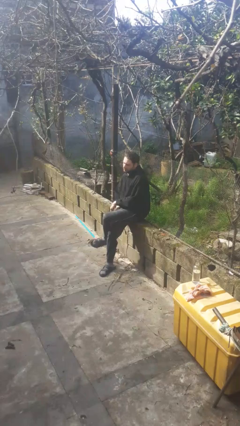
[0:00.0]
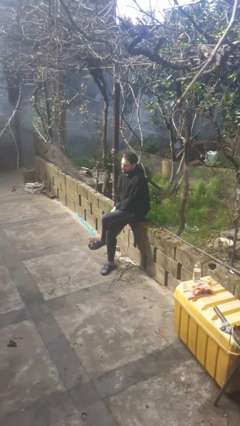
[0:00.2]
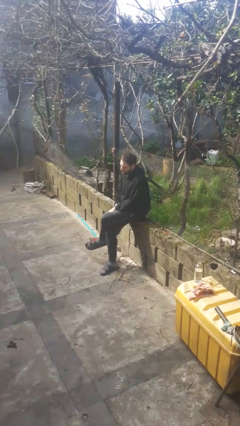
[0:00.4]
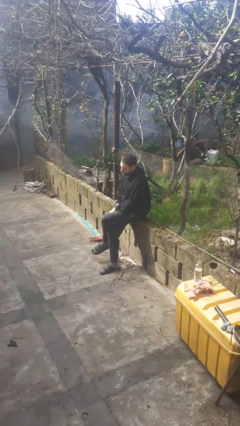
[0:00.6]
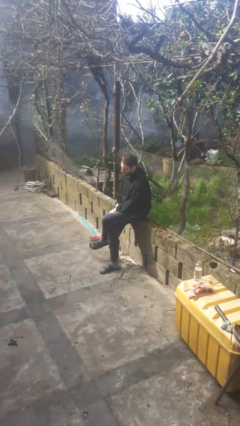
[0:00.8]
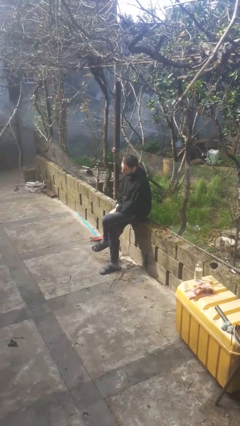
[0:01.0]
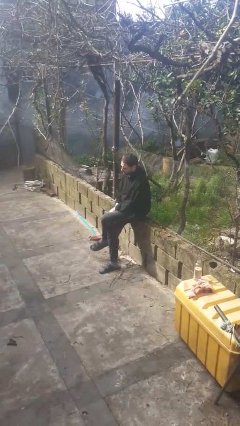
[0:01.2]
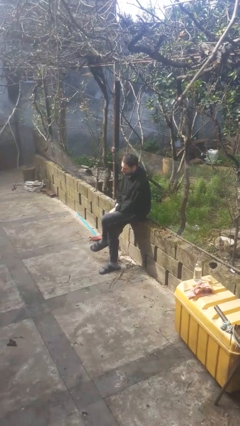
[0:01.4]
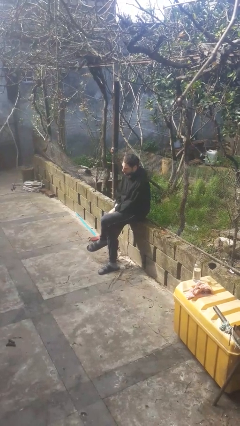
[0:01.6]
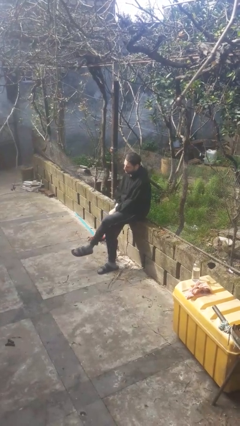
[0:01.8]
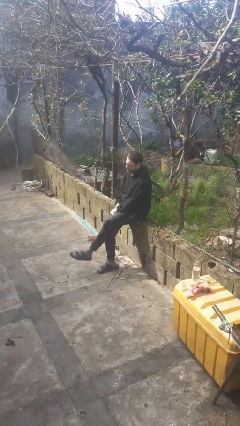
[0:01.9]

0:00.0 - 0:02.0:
person crosses legs

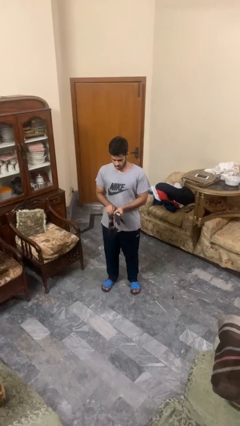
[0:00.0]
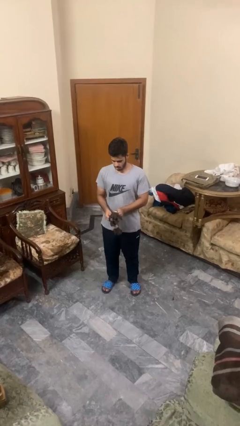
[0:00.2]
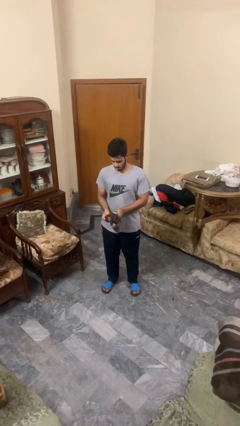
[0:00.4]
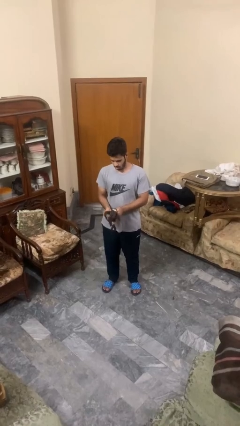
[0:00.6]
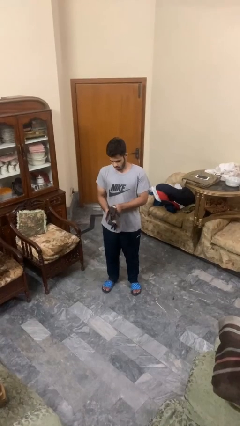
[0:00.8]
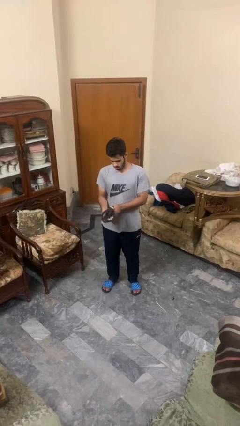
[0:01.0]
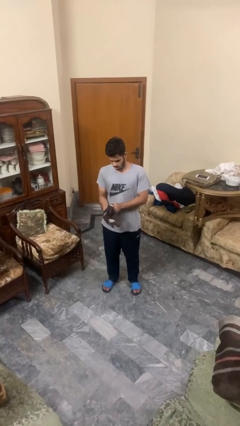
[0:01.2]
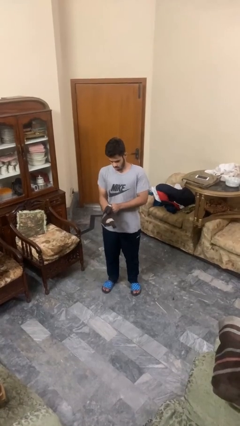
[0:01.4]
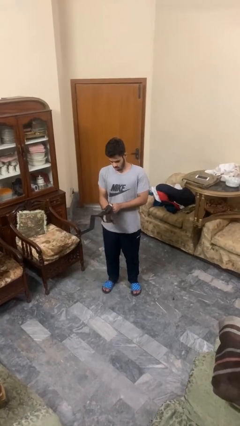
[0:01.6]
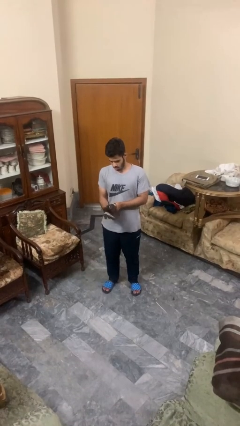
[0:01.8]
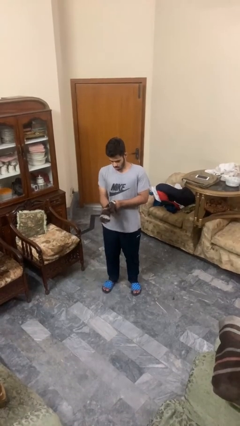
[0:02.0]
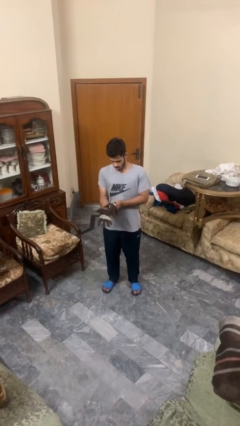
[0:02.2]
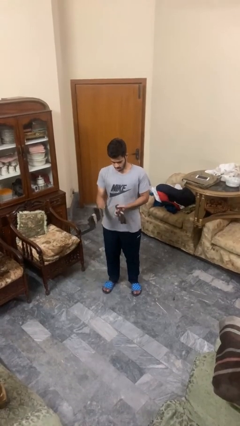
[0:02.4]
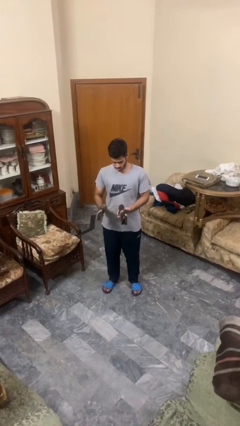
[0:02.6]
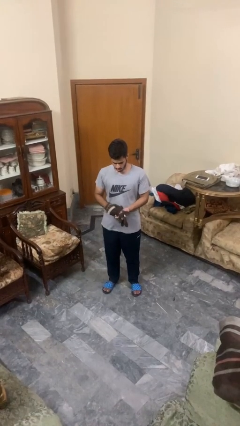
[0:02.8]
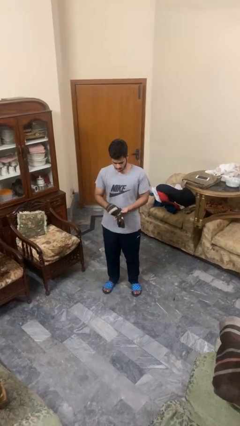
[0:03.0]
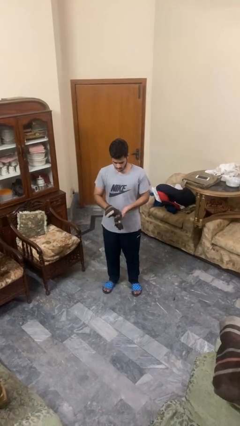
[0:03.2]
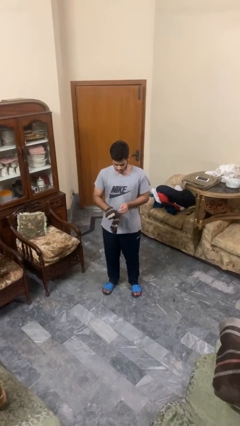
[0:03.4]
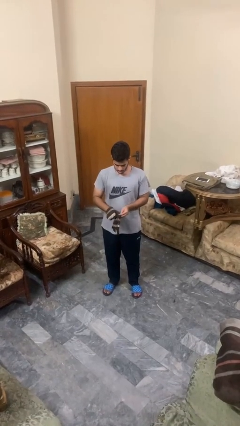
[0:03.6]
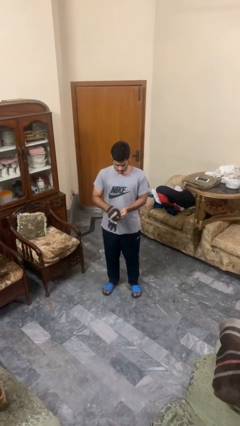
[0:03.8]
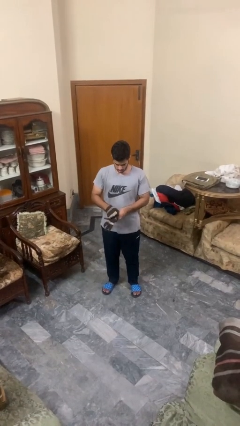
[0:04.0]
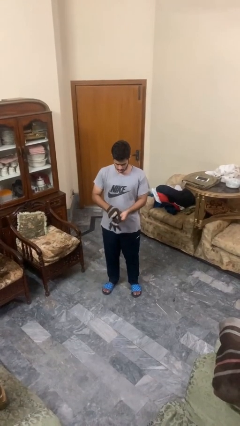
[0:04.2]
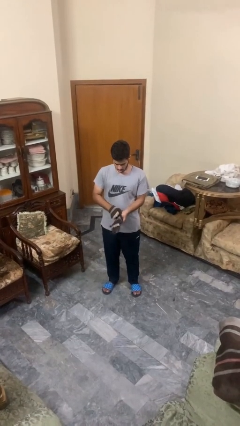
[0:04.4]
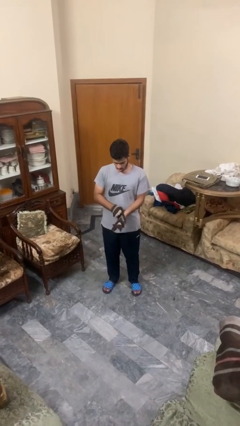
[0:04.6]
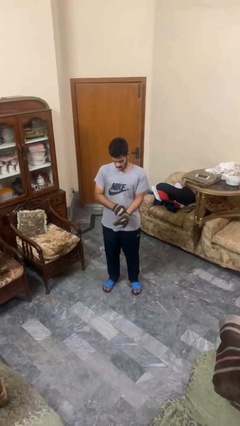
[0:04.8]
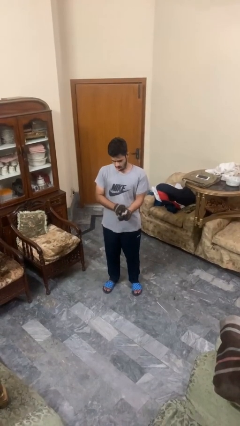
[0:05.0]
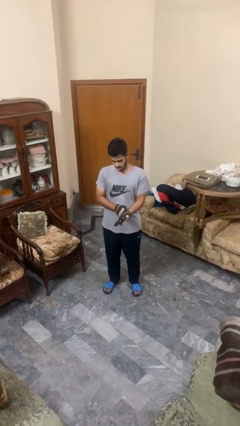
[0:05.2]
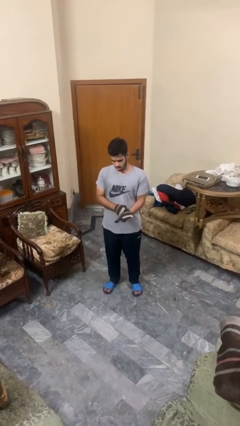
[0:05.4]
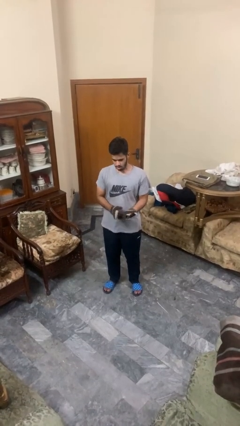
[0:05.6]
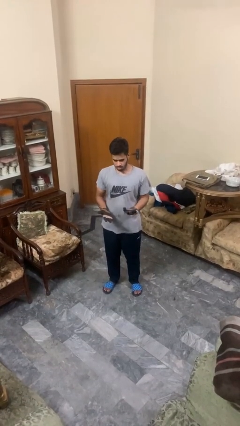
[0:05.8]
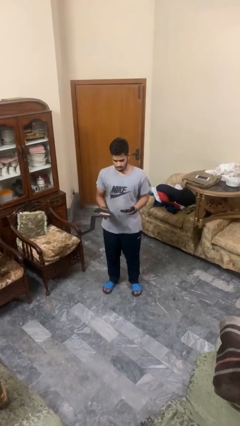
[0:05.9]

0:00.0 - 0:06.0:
person puts on gloves

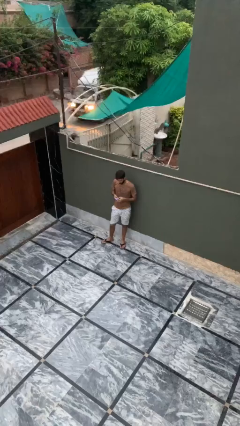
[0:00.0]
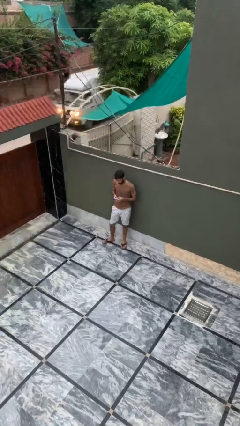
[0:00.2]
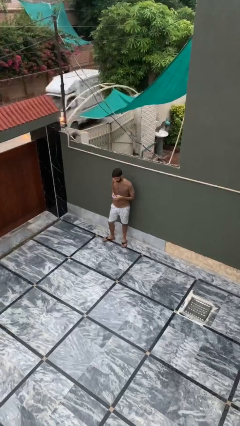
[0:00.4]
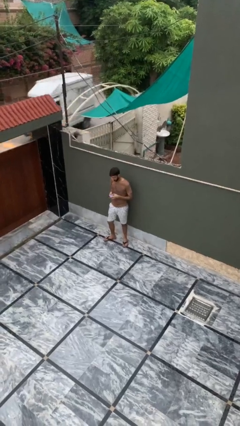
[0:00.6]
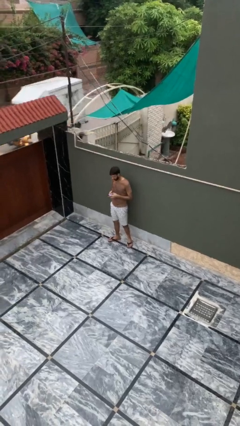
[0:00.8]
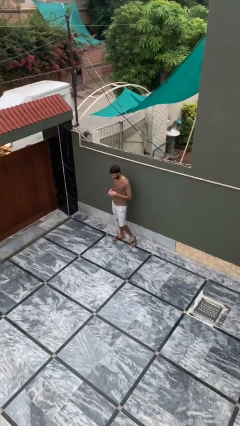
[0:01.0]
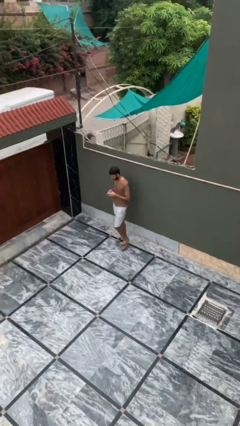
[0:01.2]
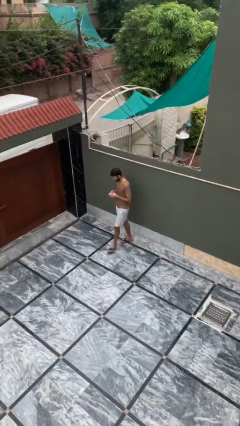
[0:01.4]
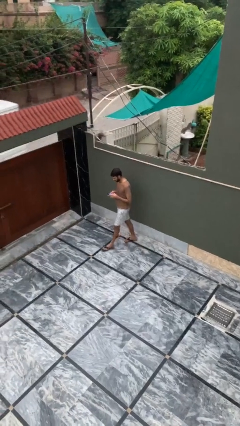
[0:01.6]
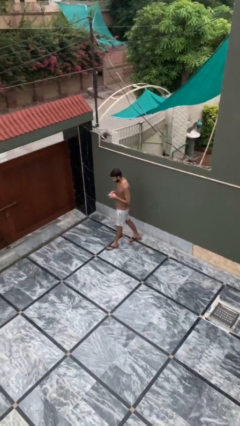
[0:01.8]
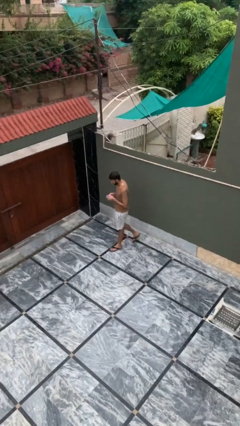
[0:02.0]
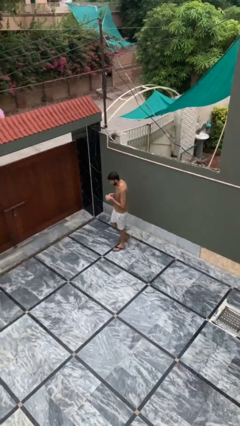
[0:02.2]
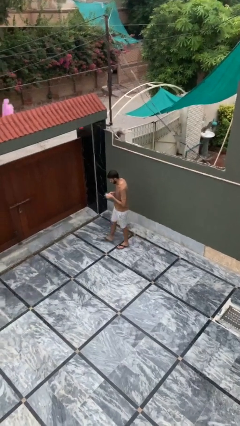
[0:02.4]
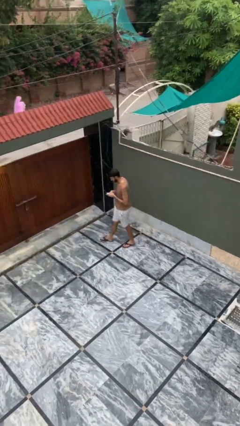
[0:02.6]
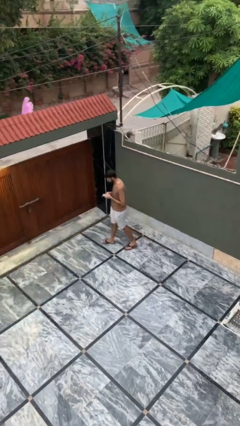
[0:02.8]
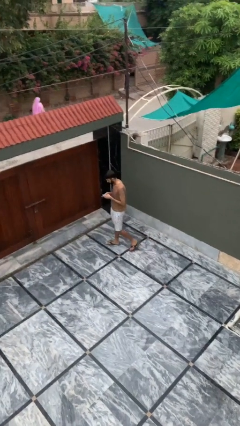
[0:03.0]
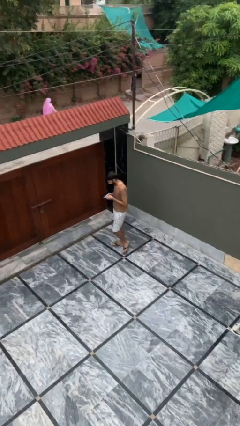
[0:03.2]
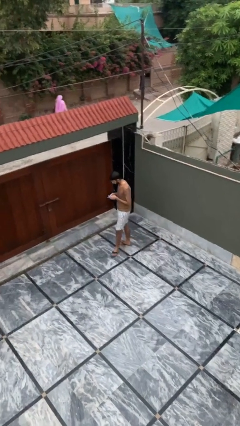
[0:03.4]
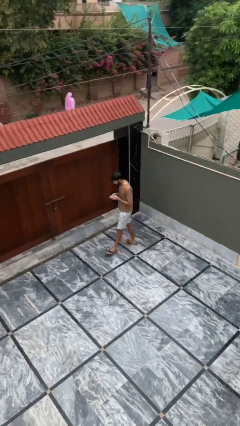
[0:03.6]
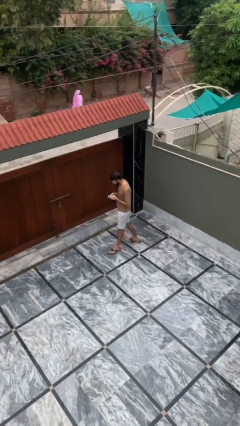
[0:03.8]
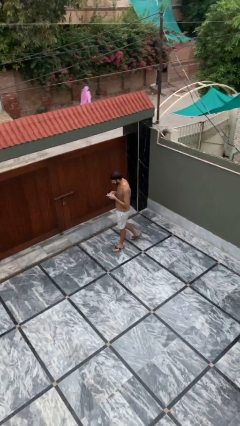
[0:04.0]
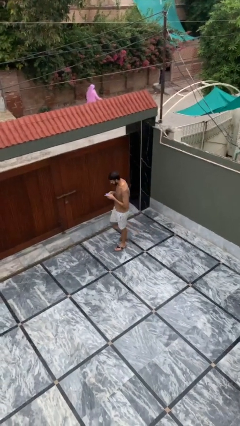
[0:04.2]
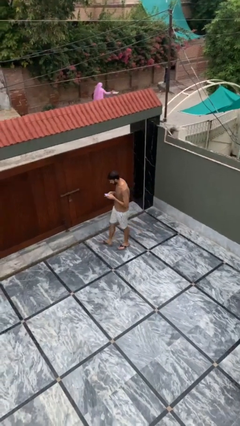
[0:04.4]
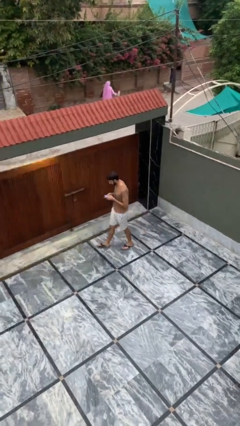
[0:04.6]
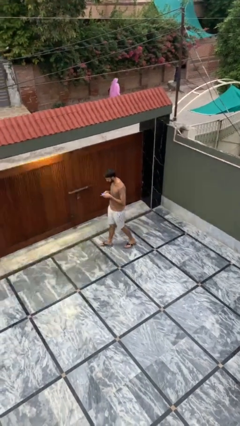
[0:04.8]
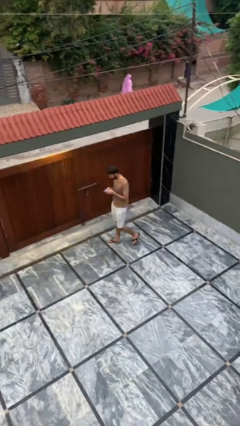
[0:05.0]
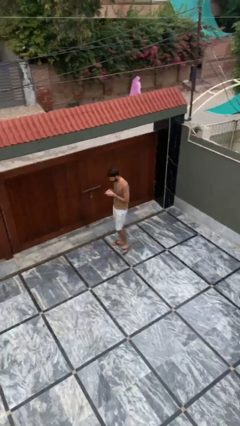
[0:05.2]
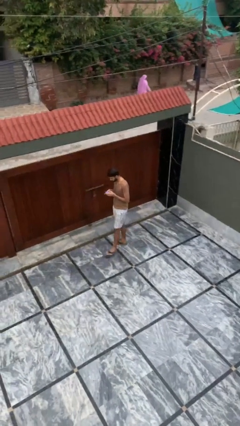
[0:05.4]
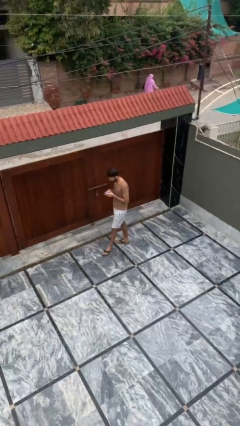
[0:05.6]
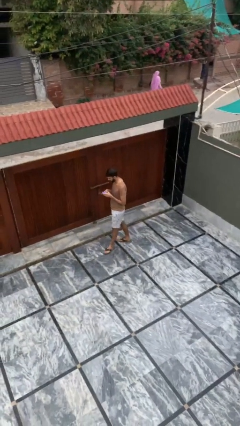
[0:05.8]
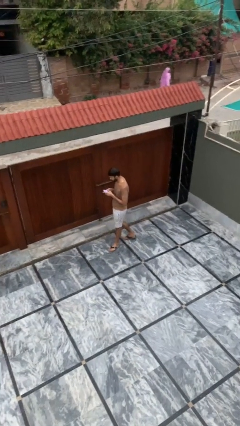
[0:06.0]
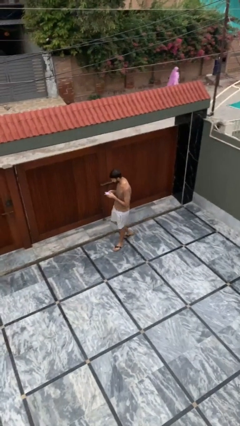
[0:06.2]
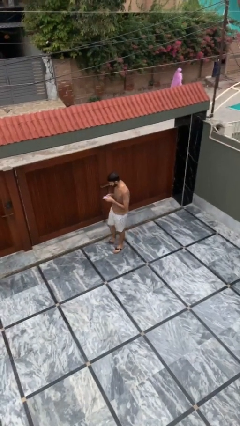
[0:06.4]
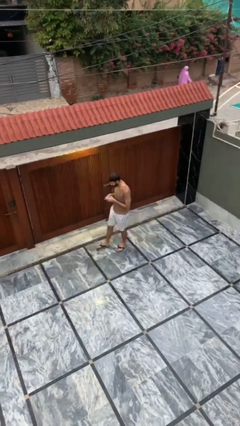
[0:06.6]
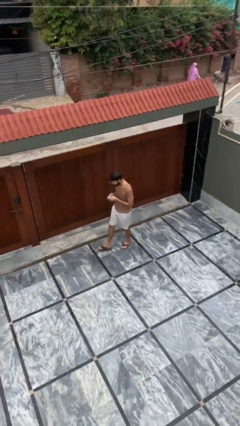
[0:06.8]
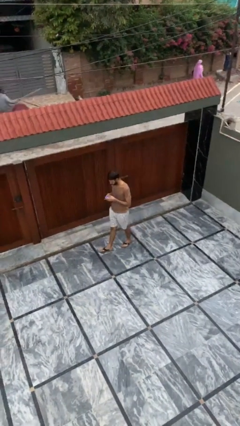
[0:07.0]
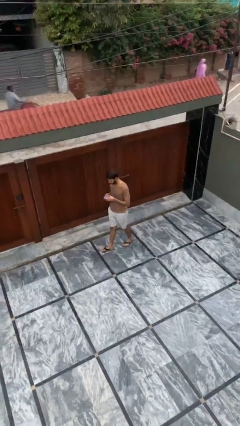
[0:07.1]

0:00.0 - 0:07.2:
person texts on phone

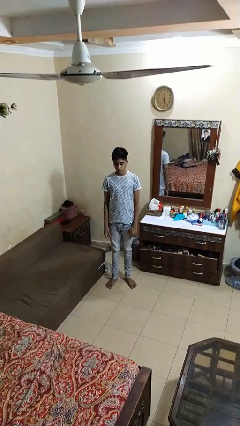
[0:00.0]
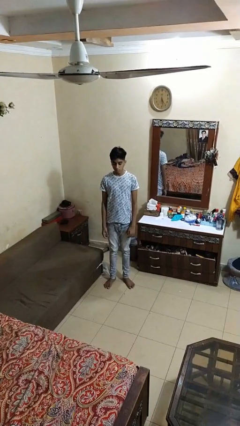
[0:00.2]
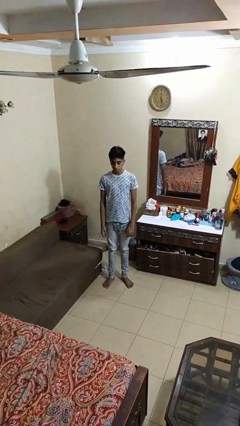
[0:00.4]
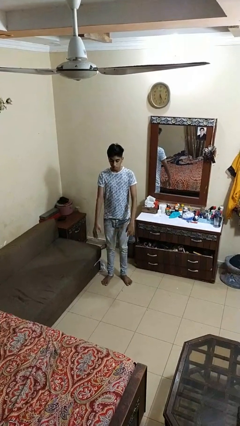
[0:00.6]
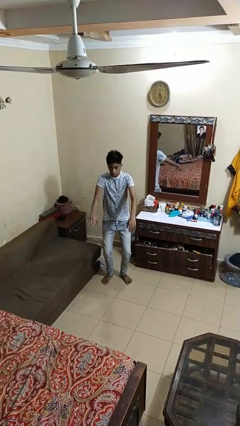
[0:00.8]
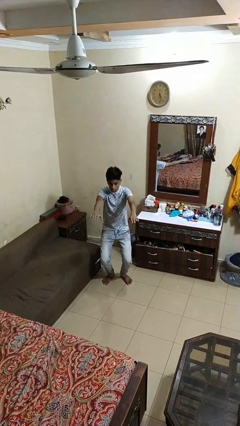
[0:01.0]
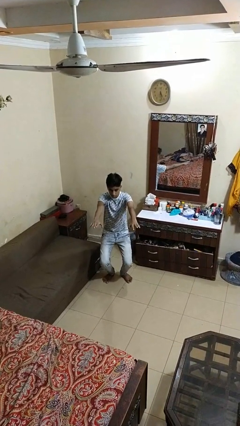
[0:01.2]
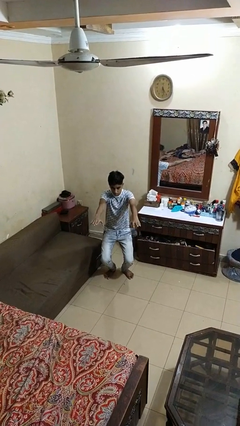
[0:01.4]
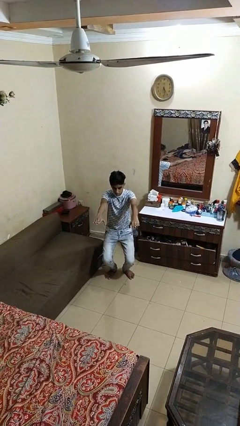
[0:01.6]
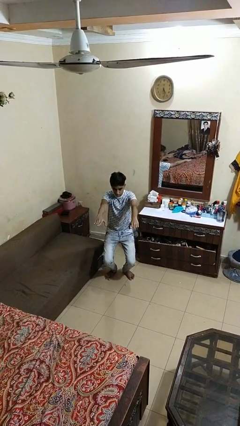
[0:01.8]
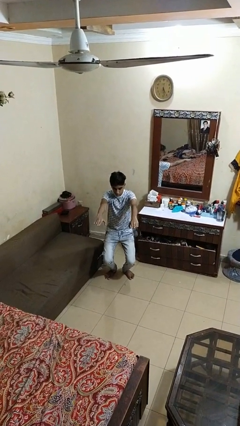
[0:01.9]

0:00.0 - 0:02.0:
person squats

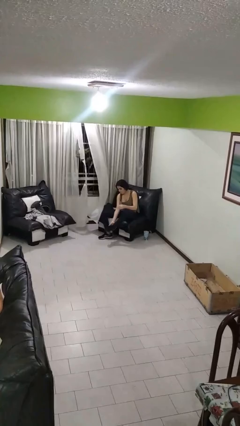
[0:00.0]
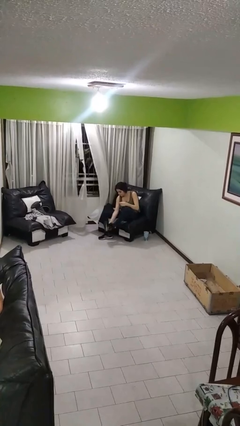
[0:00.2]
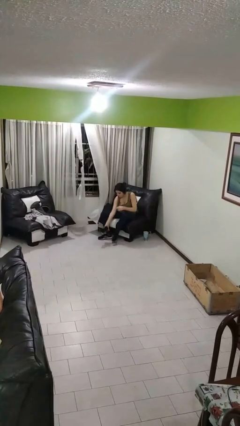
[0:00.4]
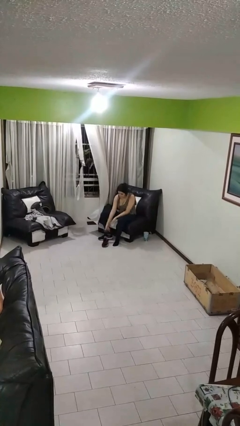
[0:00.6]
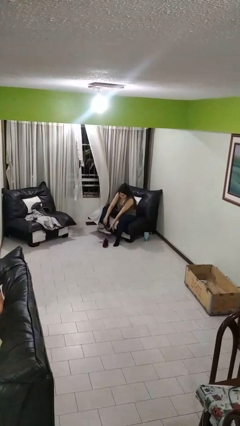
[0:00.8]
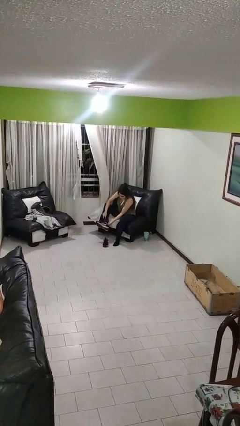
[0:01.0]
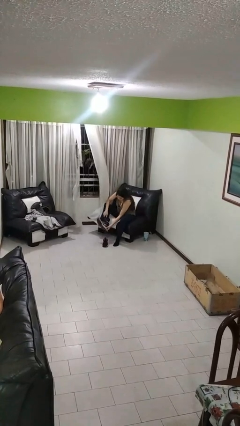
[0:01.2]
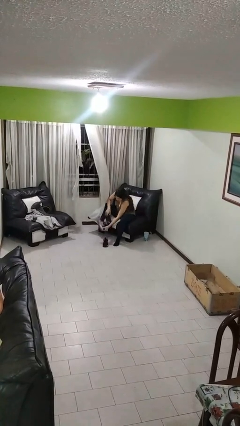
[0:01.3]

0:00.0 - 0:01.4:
person takes off shoes
